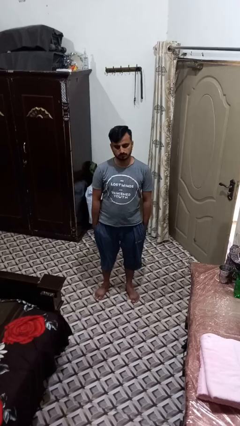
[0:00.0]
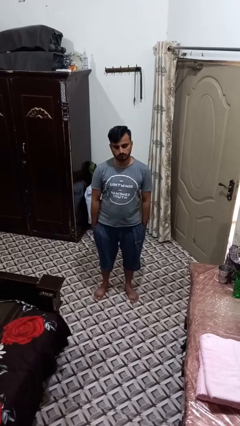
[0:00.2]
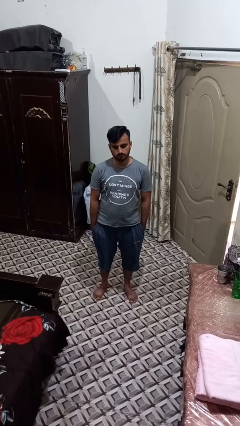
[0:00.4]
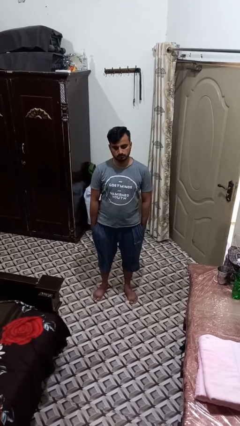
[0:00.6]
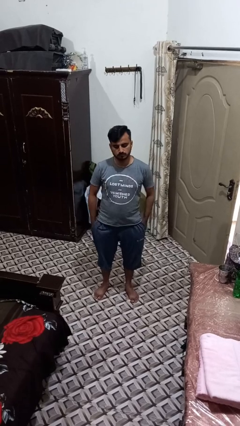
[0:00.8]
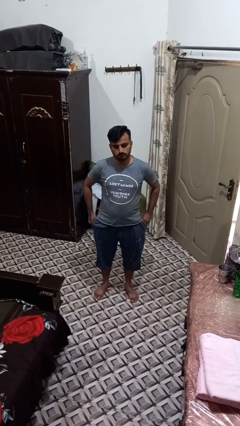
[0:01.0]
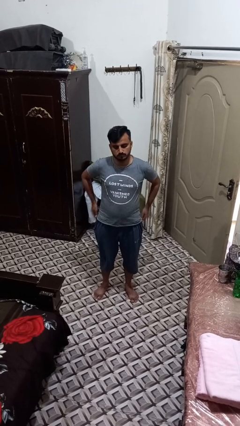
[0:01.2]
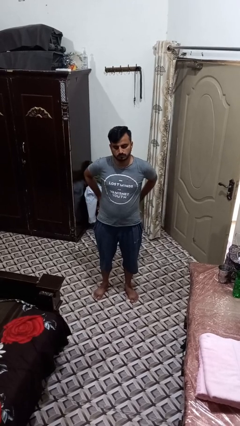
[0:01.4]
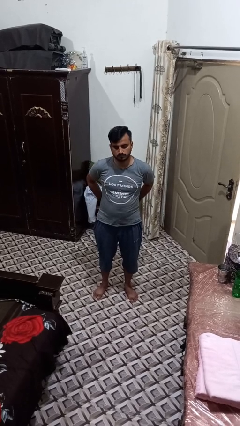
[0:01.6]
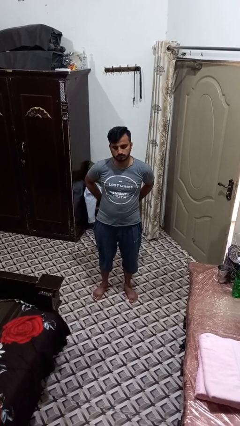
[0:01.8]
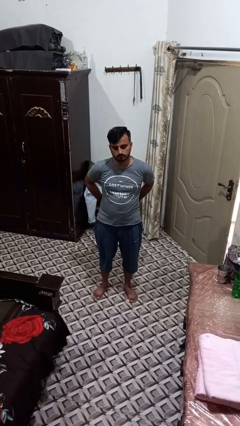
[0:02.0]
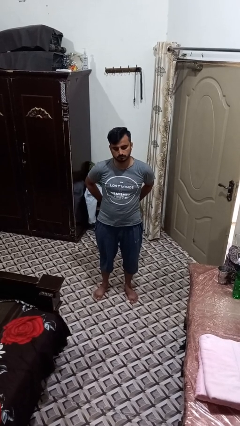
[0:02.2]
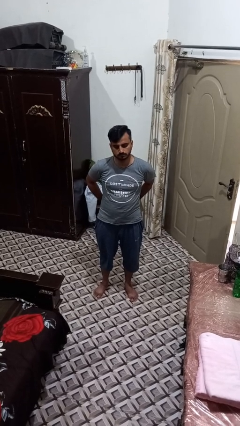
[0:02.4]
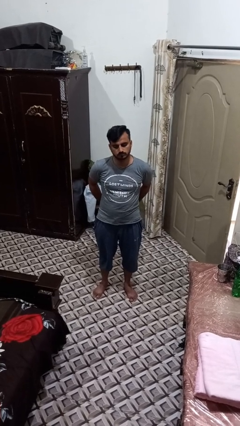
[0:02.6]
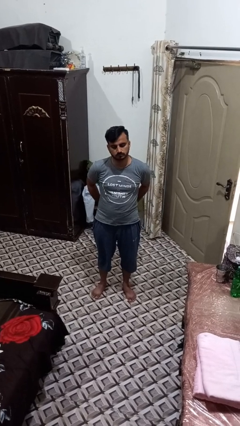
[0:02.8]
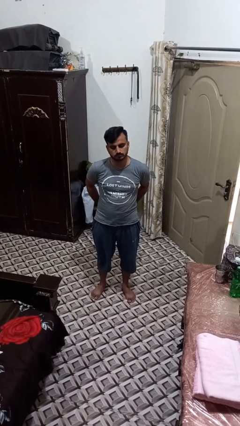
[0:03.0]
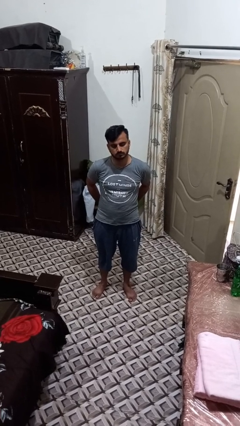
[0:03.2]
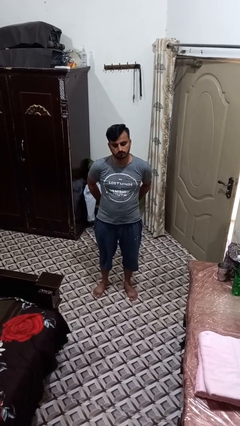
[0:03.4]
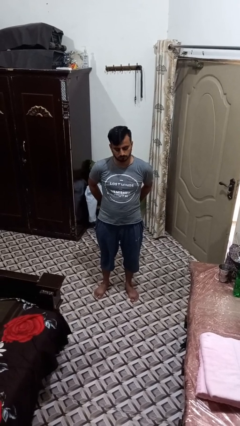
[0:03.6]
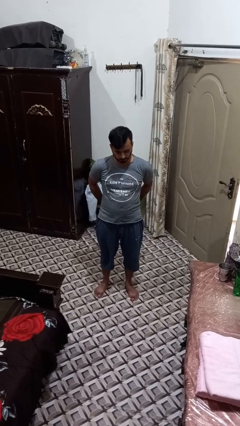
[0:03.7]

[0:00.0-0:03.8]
person puts hands in back pockets

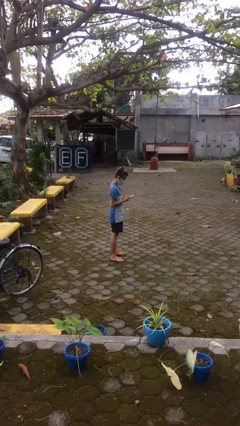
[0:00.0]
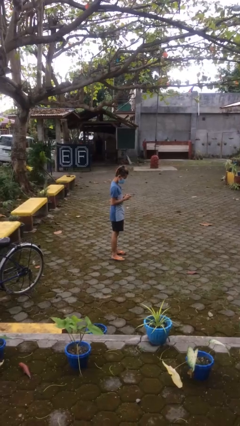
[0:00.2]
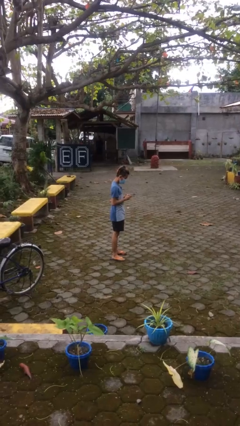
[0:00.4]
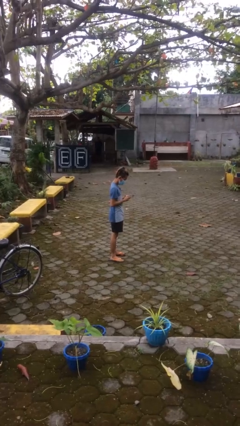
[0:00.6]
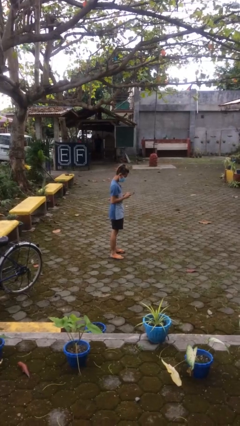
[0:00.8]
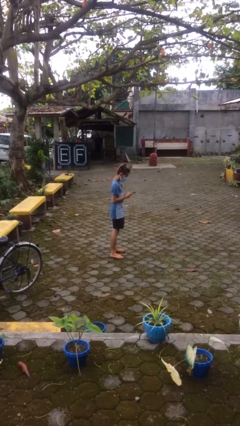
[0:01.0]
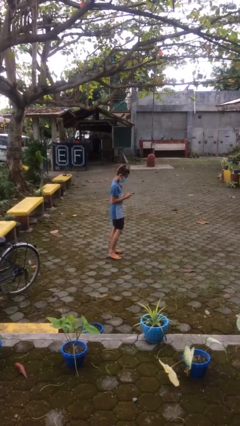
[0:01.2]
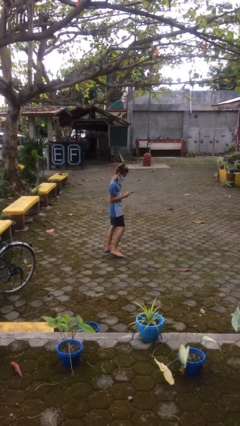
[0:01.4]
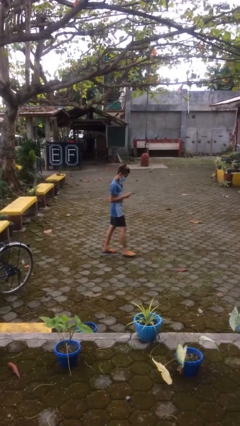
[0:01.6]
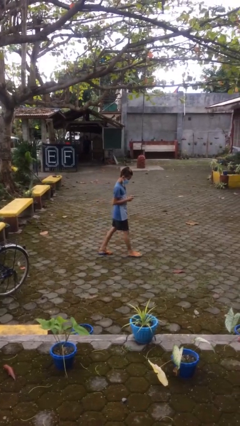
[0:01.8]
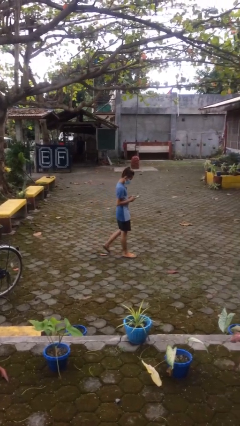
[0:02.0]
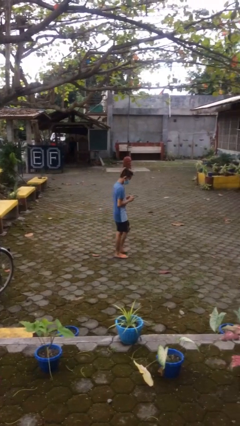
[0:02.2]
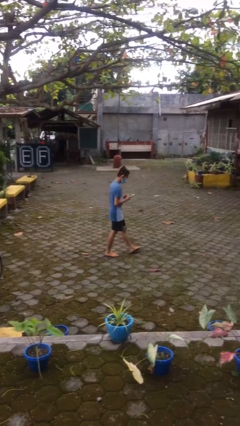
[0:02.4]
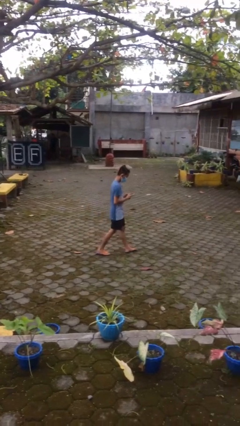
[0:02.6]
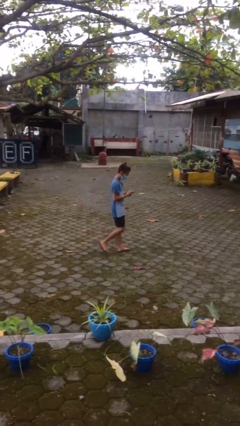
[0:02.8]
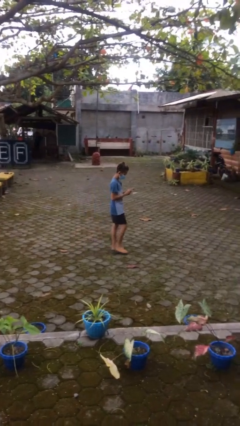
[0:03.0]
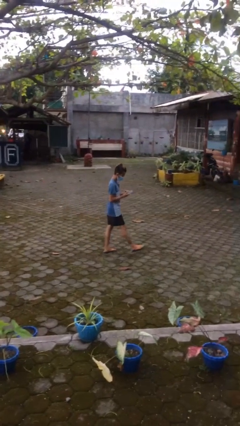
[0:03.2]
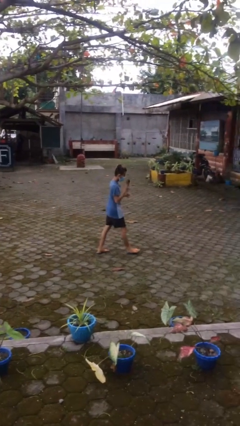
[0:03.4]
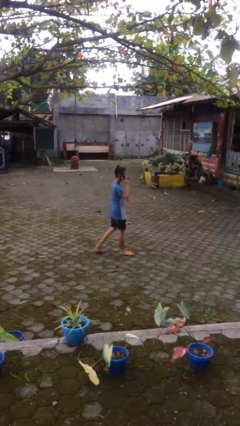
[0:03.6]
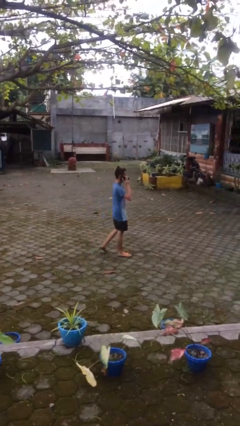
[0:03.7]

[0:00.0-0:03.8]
person texts on phone

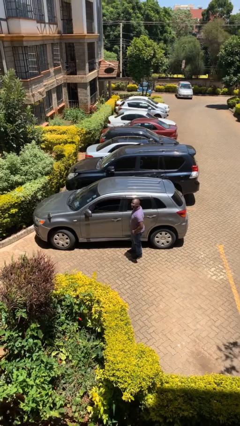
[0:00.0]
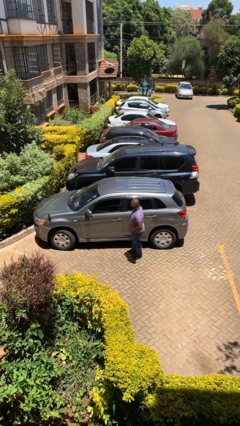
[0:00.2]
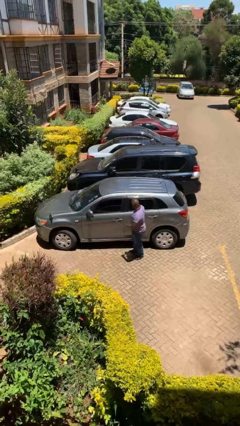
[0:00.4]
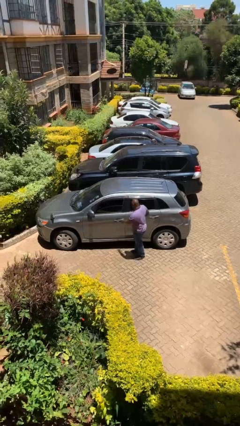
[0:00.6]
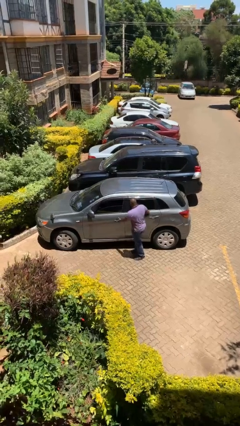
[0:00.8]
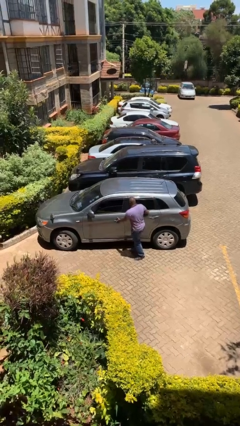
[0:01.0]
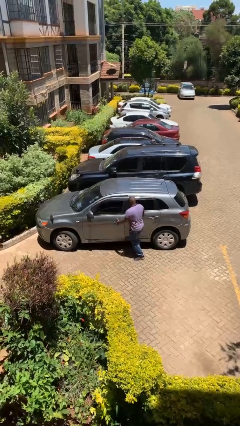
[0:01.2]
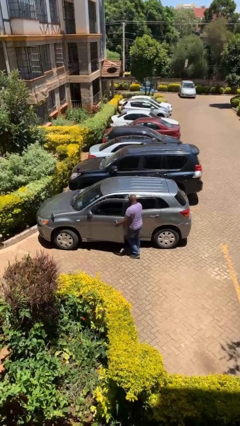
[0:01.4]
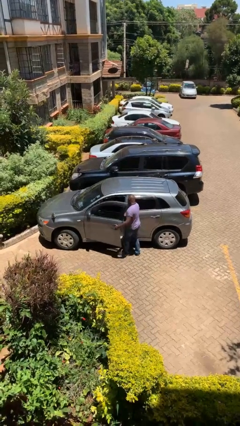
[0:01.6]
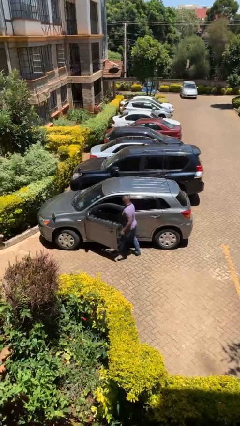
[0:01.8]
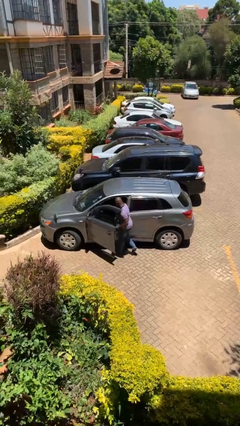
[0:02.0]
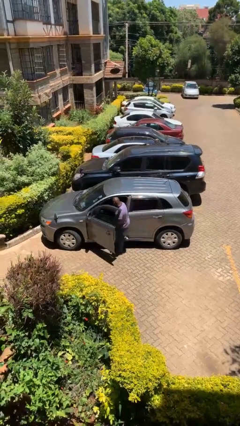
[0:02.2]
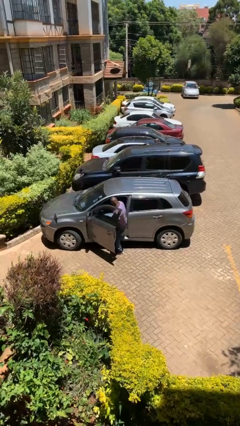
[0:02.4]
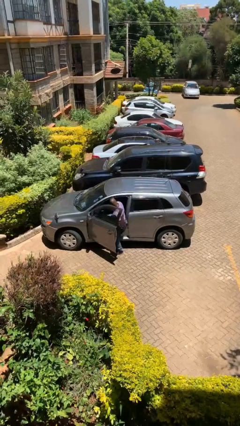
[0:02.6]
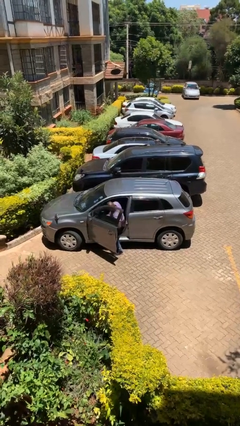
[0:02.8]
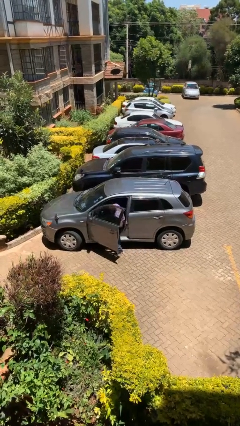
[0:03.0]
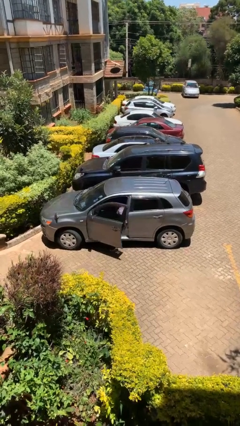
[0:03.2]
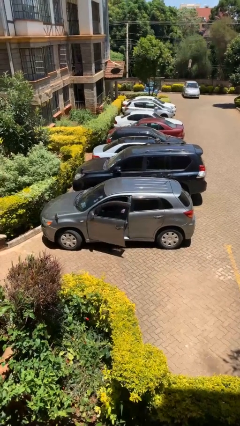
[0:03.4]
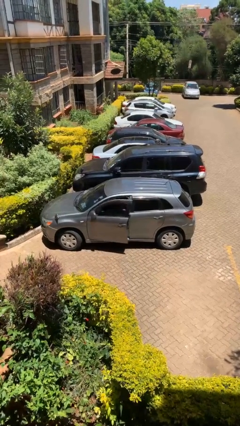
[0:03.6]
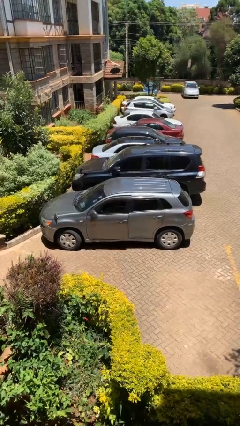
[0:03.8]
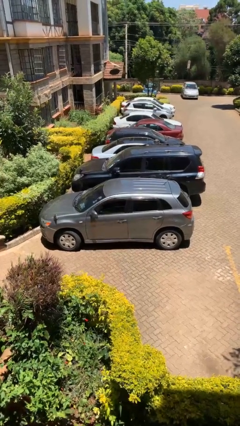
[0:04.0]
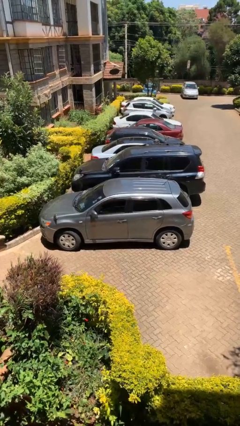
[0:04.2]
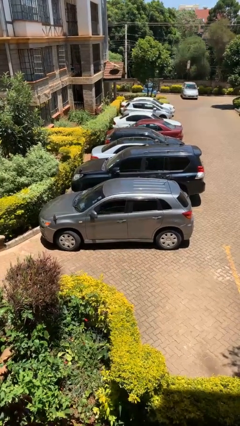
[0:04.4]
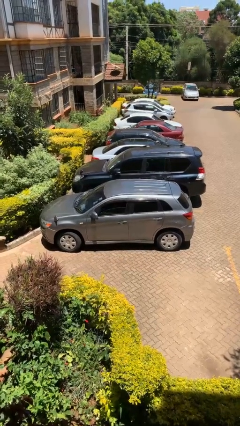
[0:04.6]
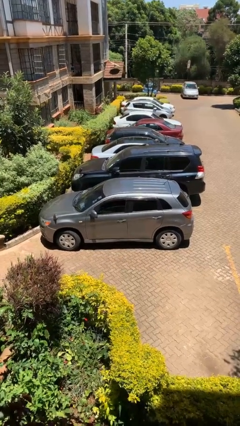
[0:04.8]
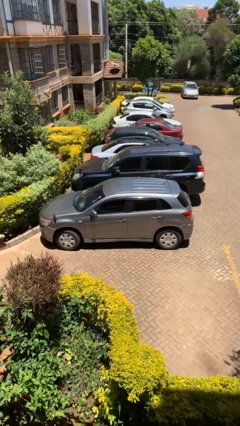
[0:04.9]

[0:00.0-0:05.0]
car picks up person

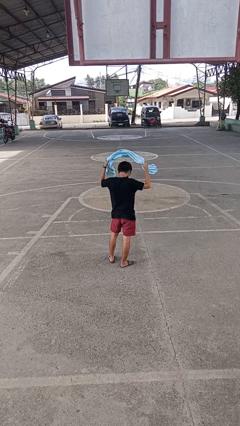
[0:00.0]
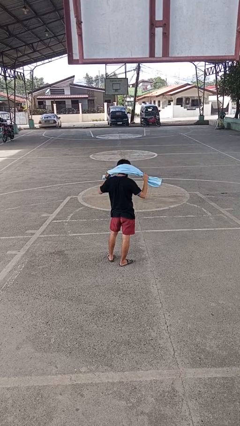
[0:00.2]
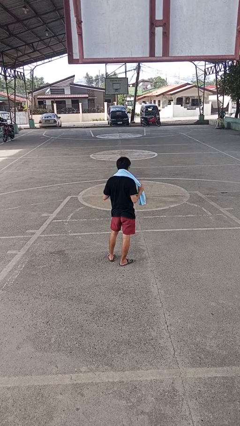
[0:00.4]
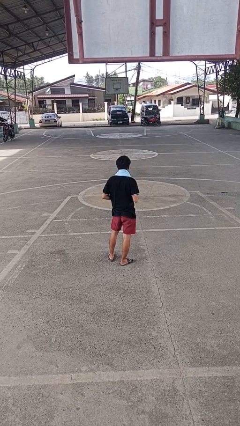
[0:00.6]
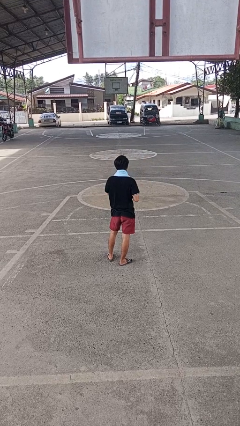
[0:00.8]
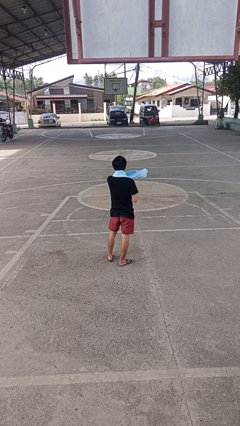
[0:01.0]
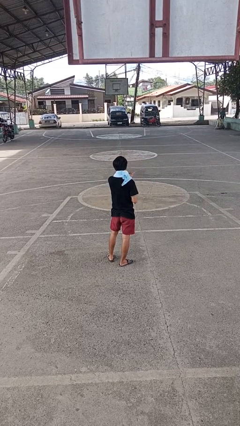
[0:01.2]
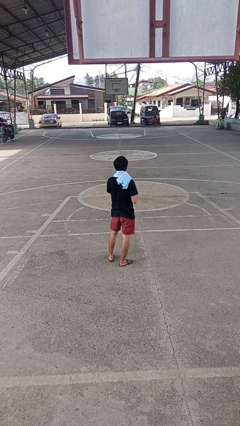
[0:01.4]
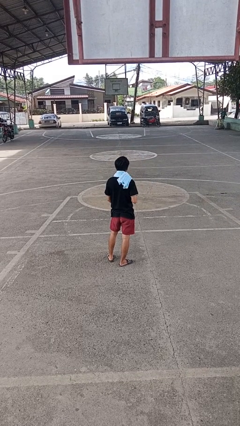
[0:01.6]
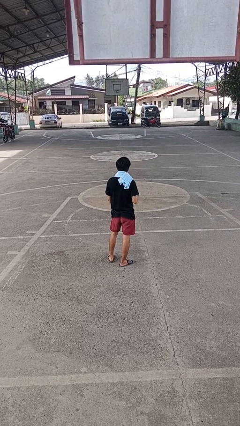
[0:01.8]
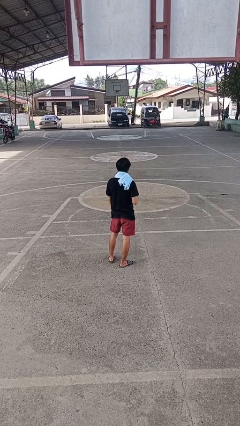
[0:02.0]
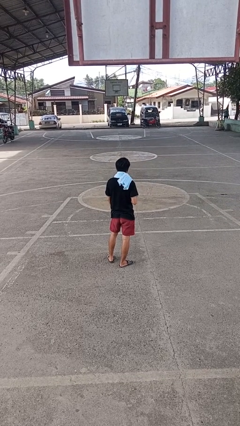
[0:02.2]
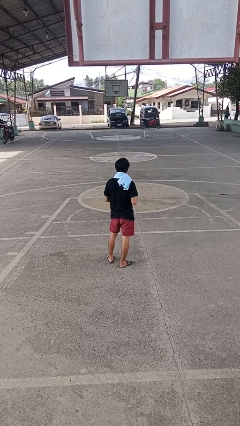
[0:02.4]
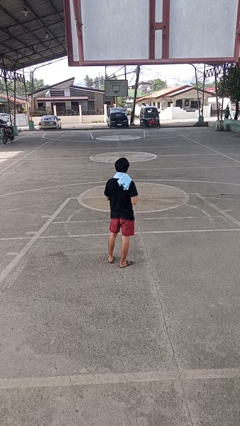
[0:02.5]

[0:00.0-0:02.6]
person puts on scarf

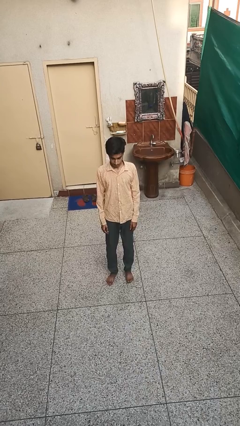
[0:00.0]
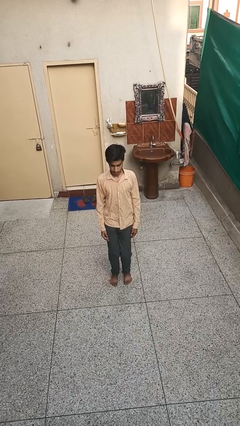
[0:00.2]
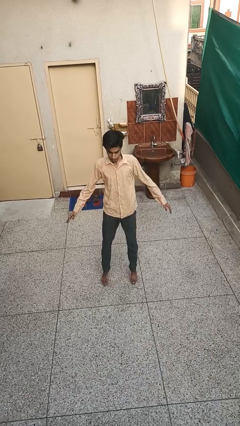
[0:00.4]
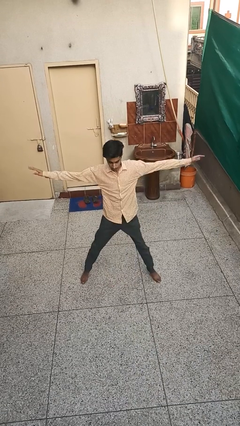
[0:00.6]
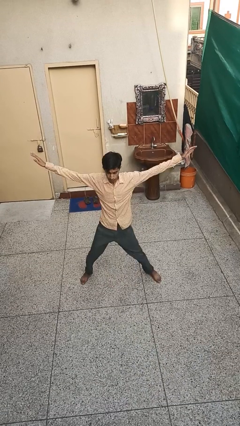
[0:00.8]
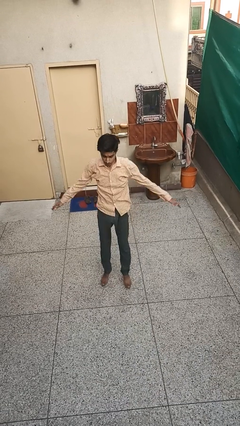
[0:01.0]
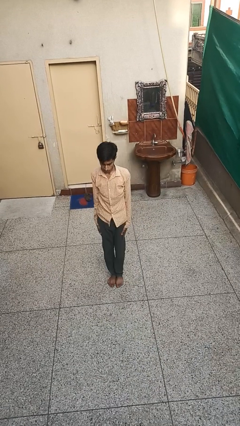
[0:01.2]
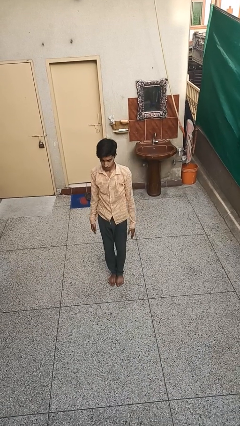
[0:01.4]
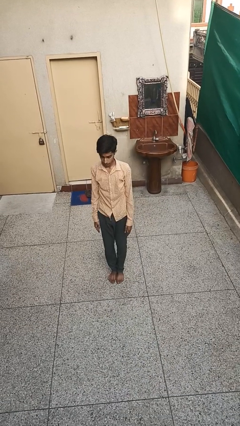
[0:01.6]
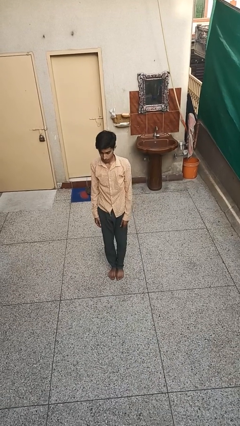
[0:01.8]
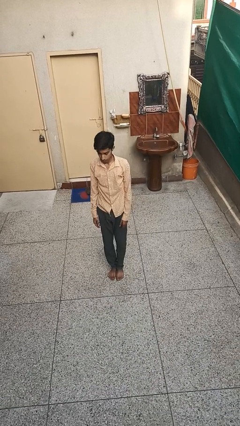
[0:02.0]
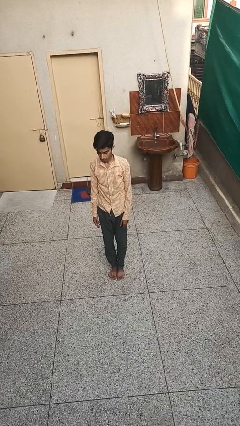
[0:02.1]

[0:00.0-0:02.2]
person exercises with jumping jacks
